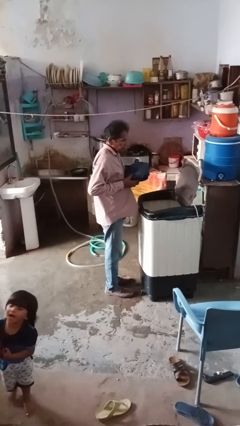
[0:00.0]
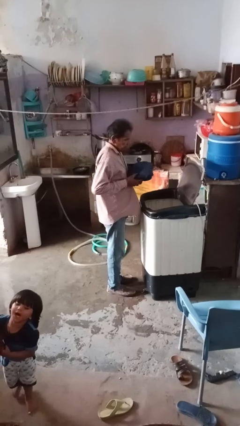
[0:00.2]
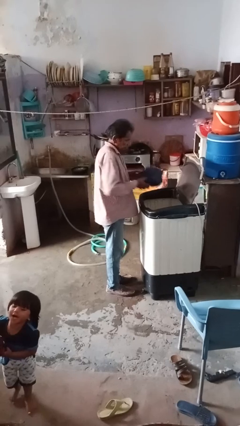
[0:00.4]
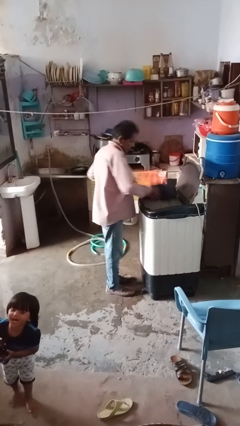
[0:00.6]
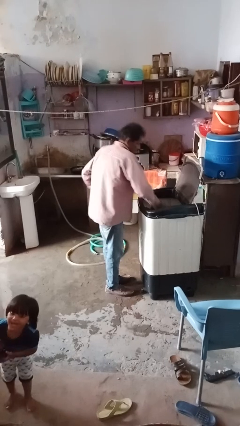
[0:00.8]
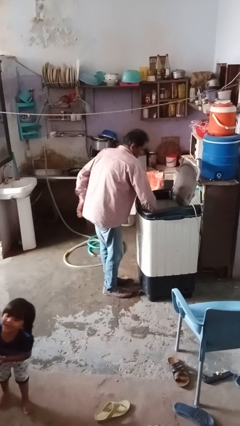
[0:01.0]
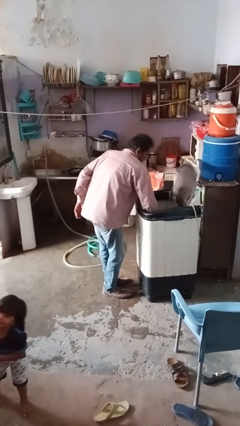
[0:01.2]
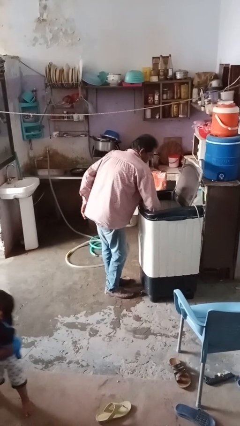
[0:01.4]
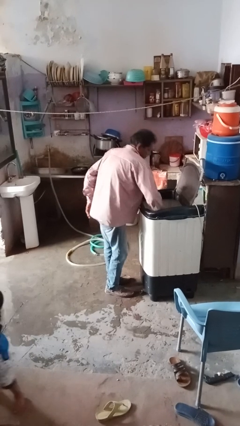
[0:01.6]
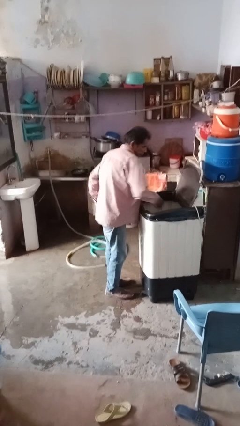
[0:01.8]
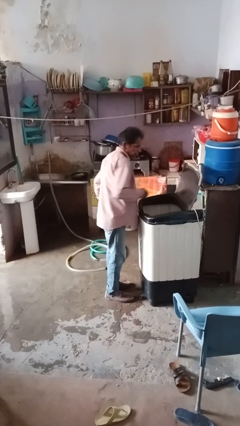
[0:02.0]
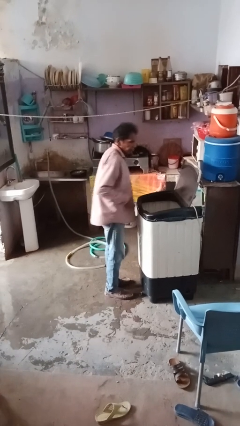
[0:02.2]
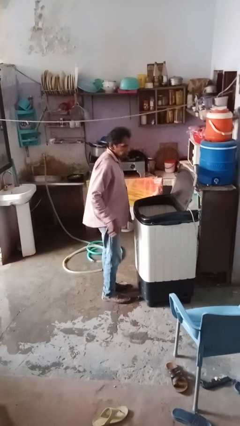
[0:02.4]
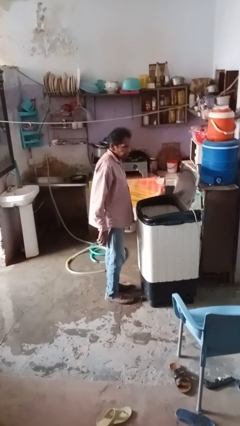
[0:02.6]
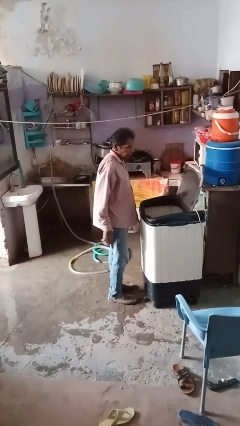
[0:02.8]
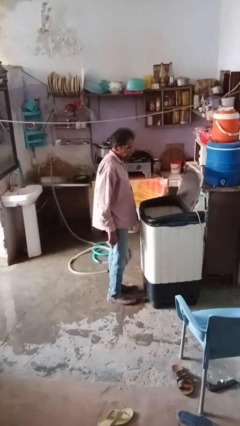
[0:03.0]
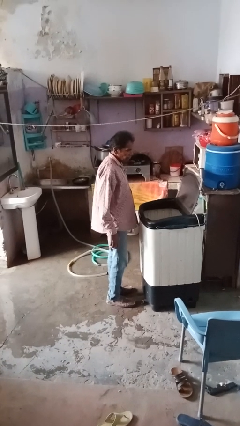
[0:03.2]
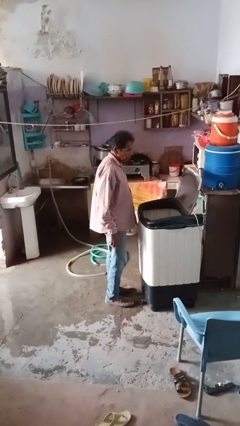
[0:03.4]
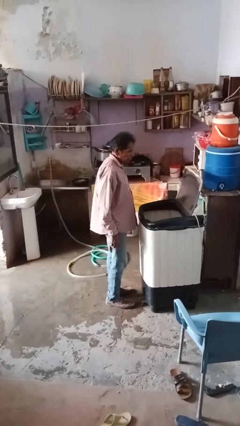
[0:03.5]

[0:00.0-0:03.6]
person loads clotheswasher

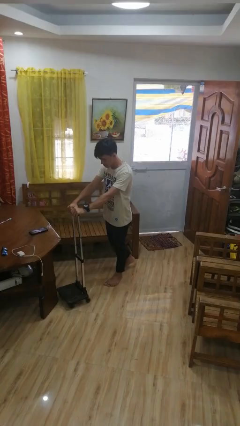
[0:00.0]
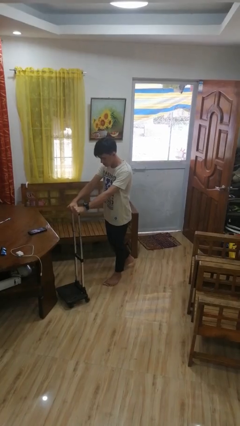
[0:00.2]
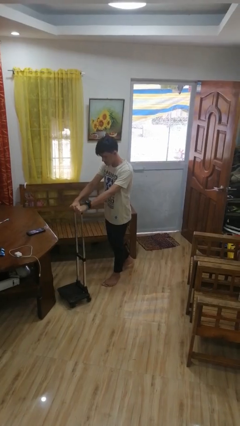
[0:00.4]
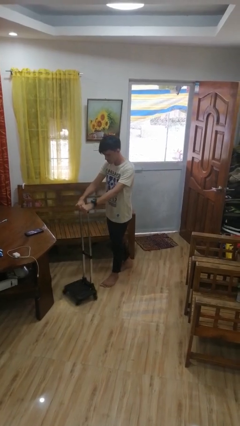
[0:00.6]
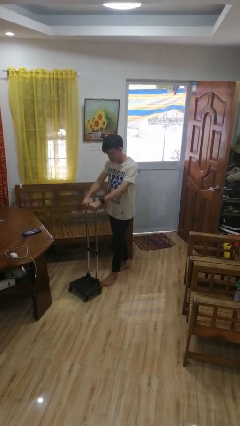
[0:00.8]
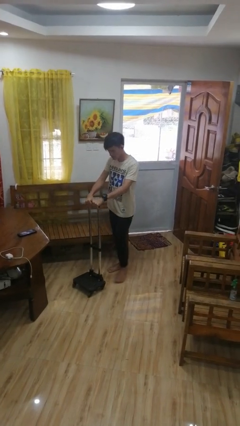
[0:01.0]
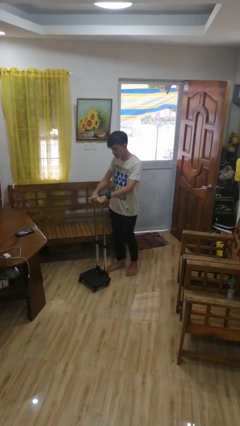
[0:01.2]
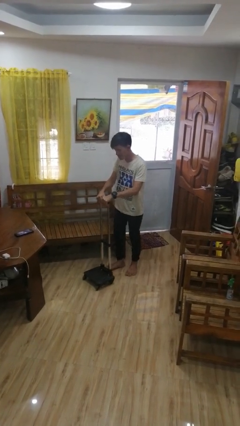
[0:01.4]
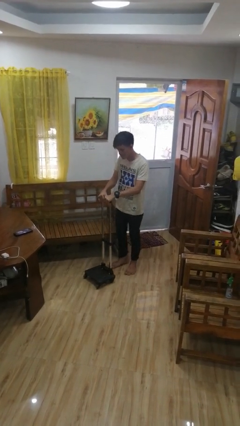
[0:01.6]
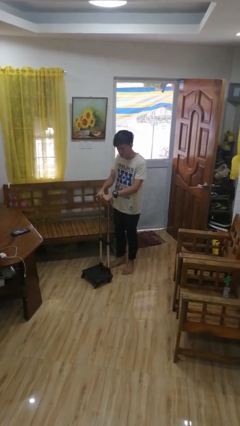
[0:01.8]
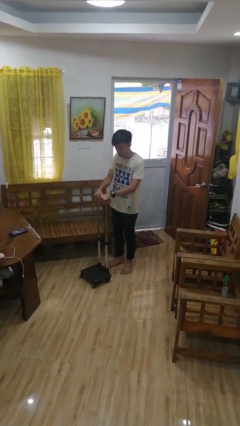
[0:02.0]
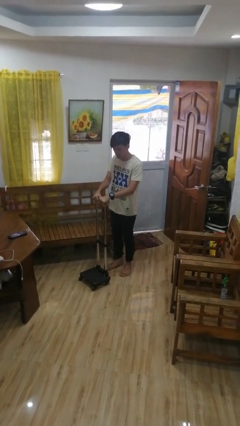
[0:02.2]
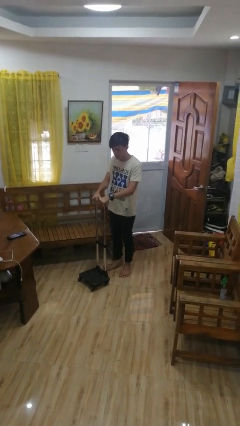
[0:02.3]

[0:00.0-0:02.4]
person pulls wheeled cart

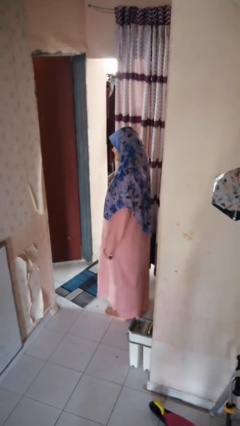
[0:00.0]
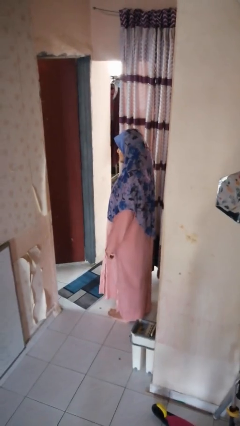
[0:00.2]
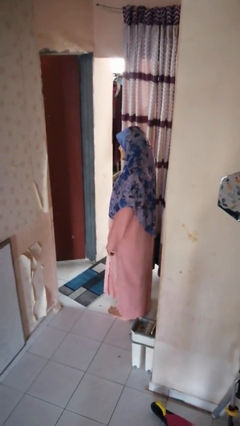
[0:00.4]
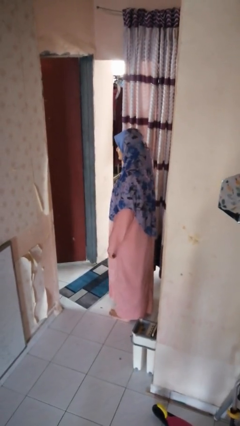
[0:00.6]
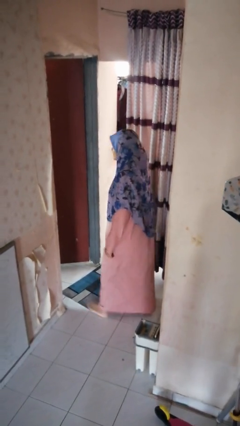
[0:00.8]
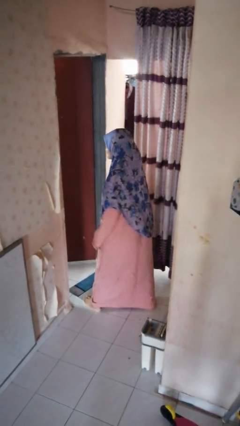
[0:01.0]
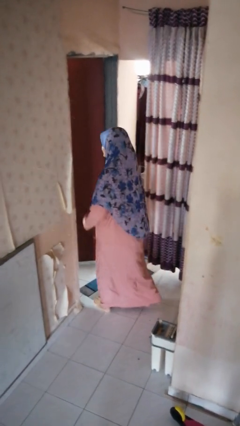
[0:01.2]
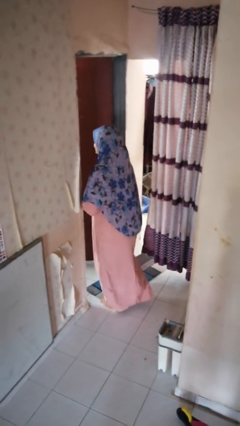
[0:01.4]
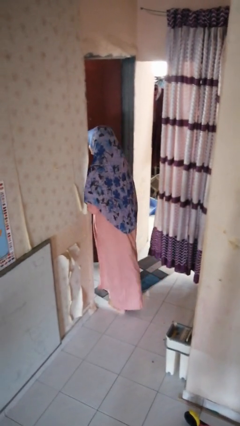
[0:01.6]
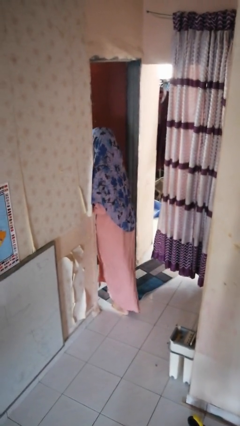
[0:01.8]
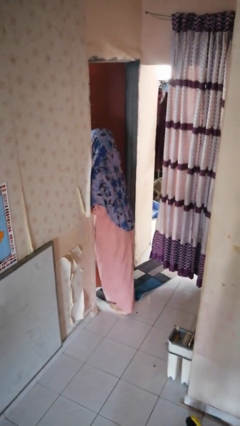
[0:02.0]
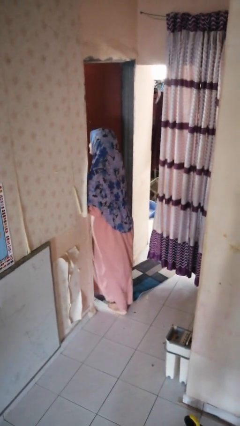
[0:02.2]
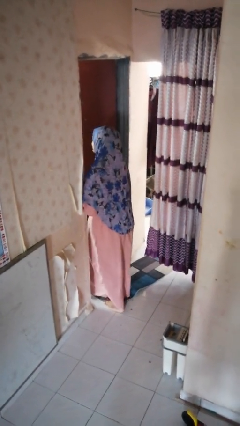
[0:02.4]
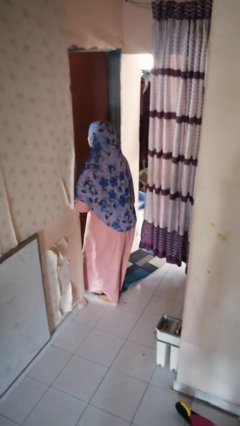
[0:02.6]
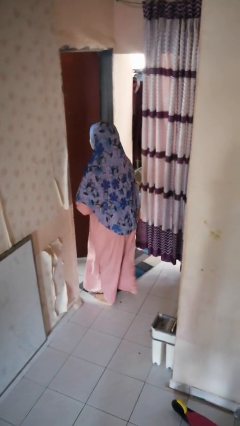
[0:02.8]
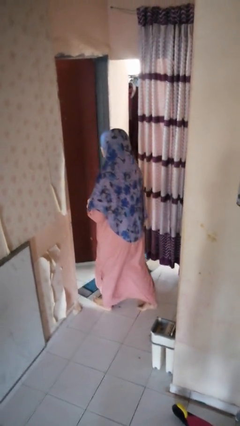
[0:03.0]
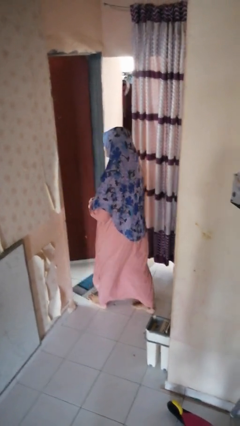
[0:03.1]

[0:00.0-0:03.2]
person bumps into wall

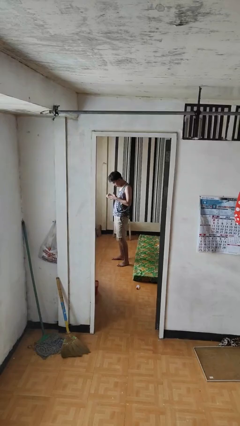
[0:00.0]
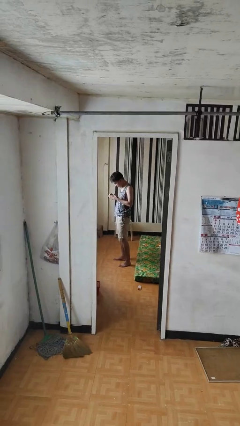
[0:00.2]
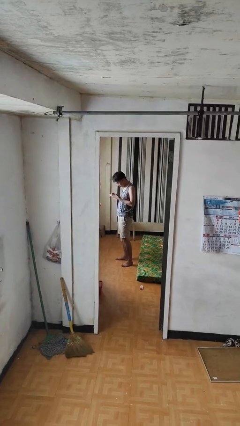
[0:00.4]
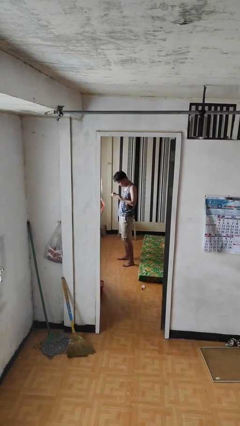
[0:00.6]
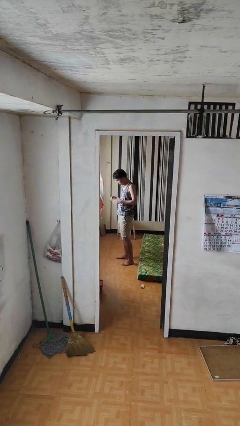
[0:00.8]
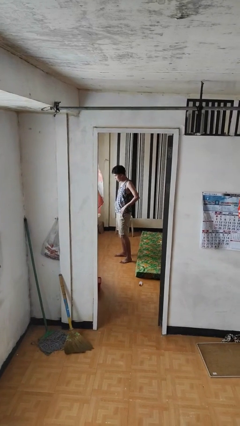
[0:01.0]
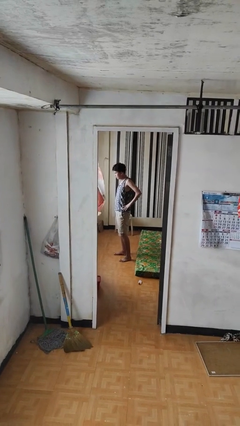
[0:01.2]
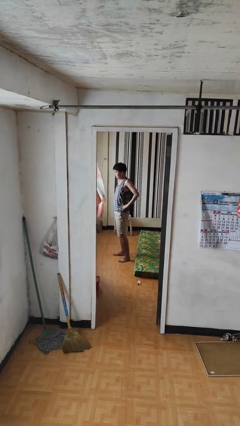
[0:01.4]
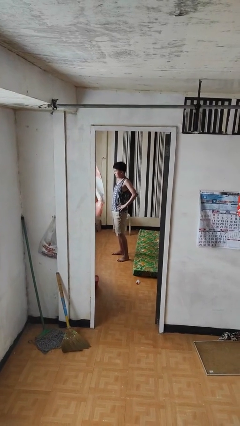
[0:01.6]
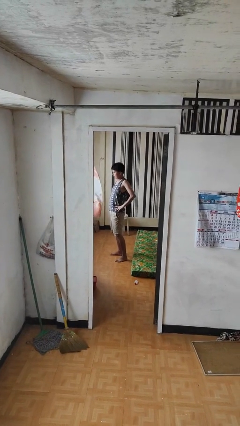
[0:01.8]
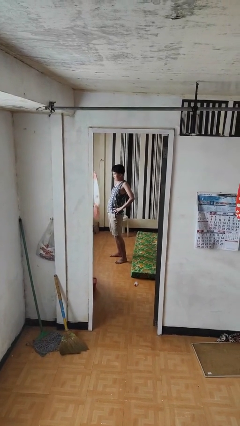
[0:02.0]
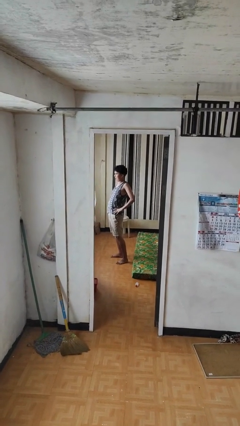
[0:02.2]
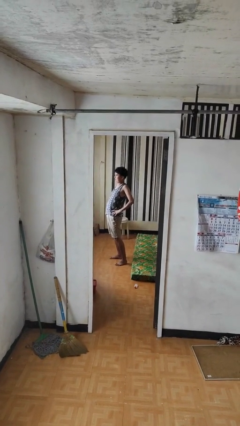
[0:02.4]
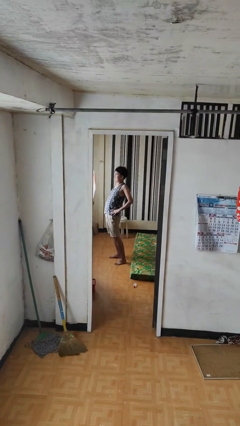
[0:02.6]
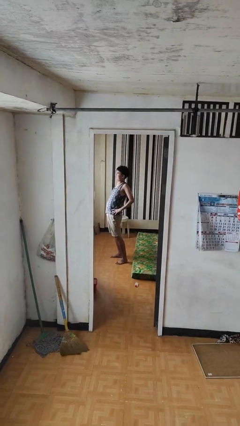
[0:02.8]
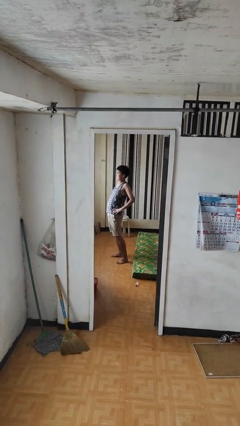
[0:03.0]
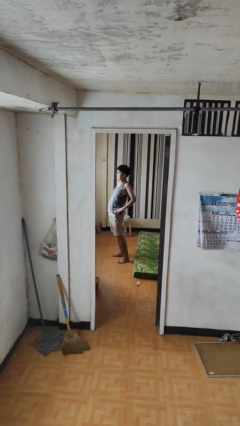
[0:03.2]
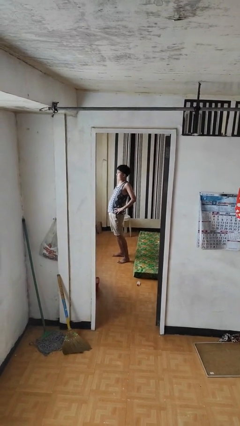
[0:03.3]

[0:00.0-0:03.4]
person stretches back

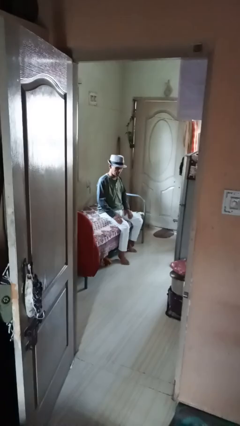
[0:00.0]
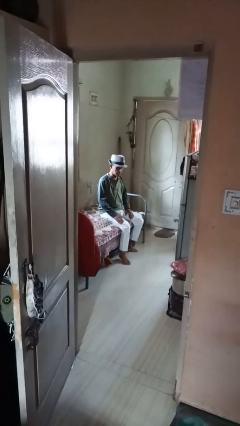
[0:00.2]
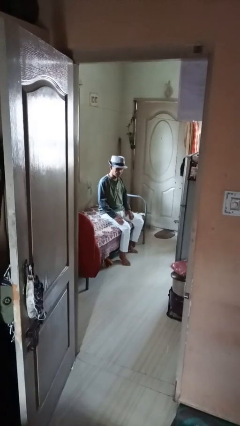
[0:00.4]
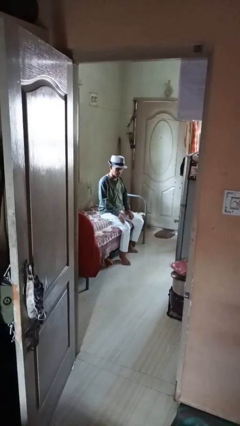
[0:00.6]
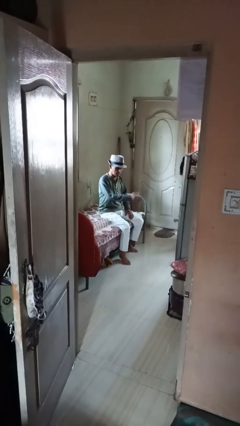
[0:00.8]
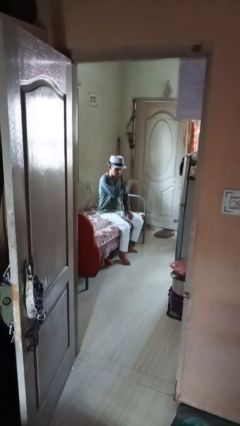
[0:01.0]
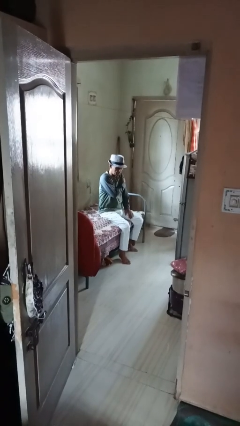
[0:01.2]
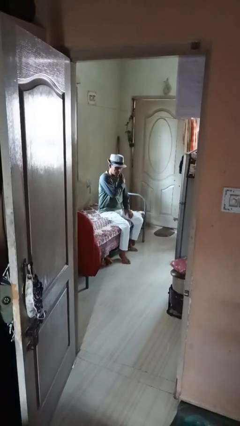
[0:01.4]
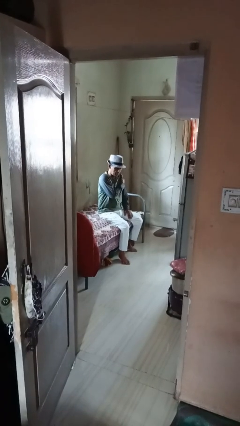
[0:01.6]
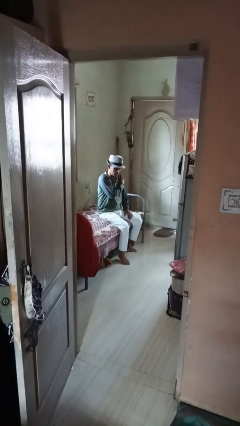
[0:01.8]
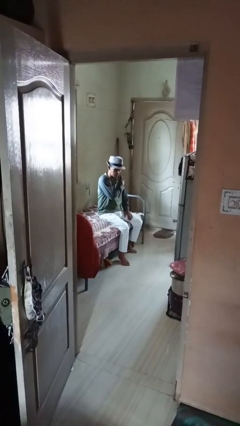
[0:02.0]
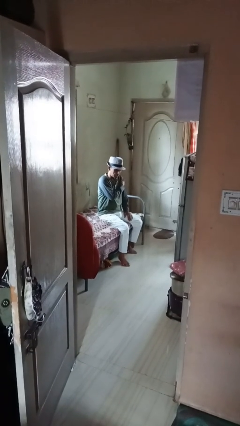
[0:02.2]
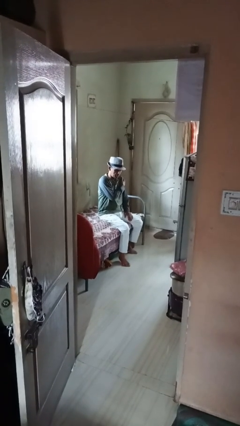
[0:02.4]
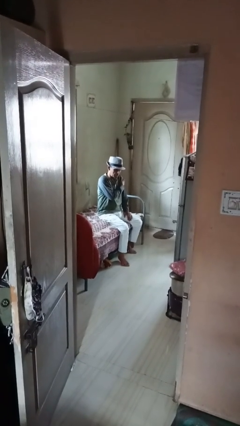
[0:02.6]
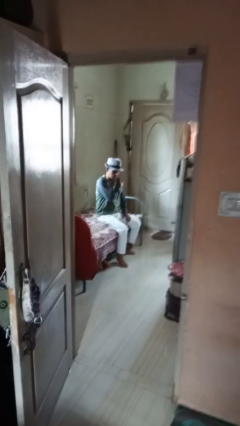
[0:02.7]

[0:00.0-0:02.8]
person swats bug

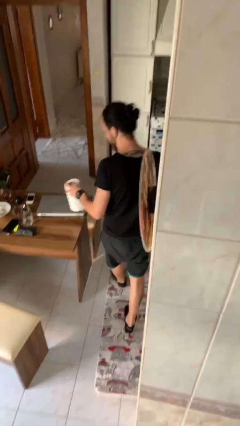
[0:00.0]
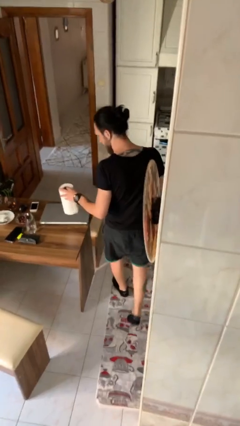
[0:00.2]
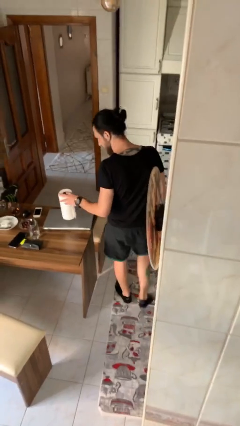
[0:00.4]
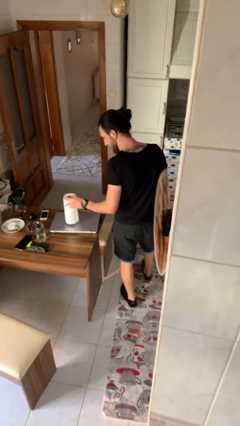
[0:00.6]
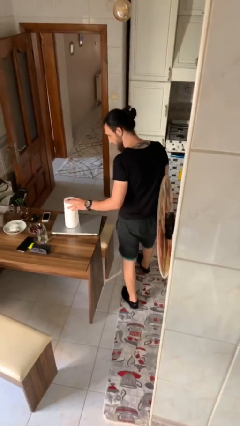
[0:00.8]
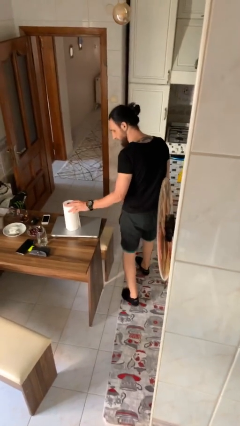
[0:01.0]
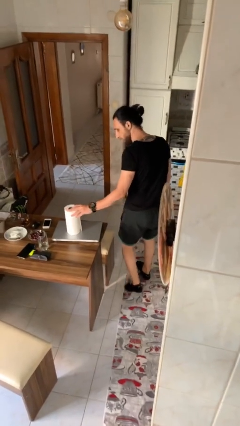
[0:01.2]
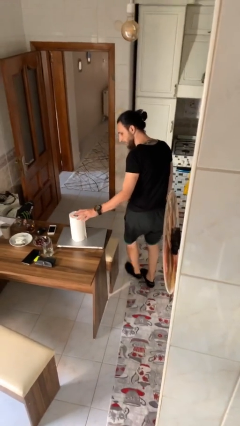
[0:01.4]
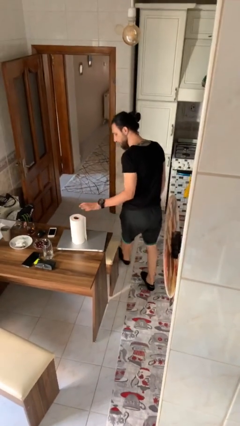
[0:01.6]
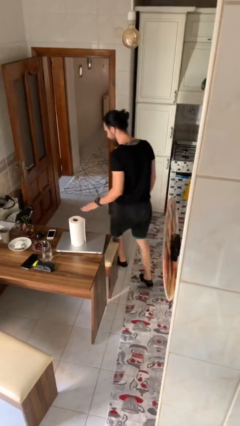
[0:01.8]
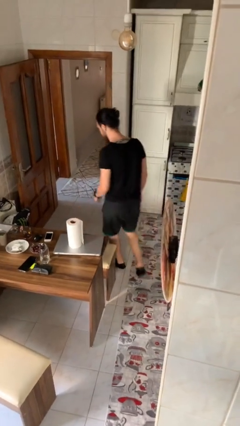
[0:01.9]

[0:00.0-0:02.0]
person puts down object on table
